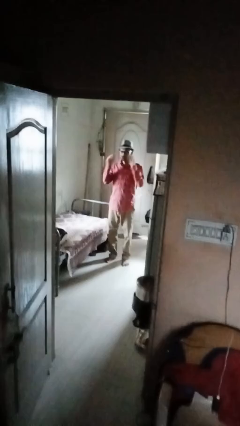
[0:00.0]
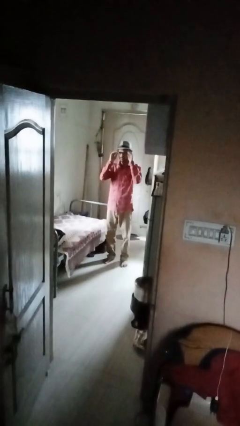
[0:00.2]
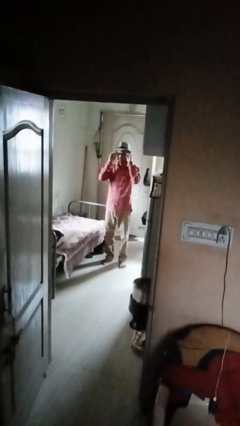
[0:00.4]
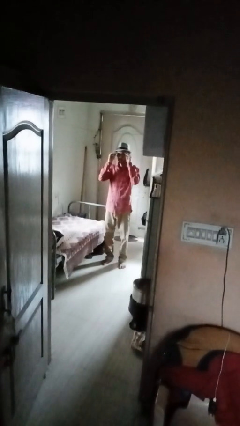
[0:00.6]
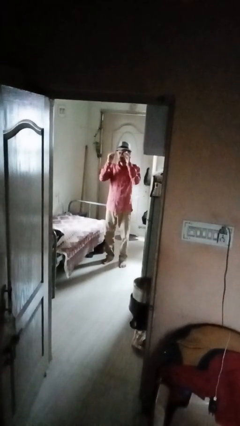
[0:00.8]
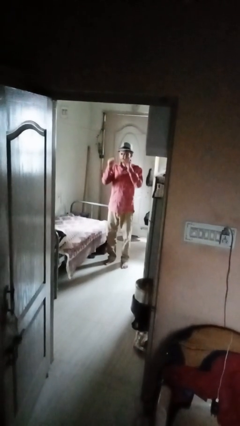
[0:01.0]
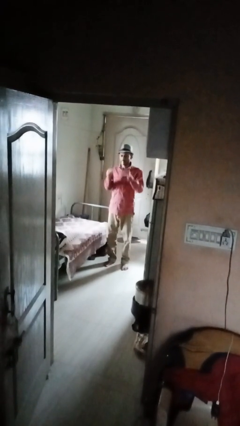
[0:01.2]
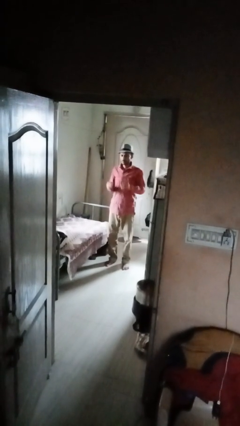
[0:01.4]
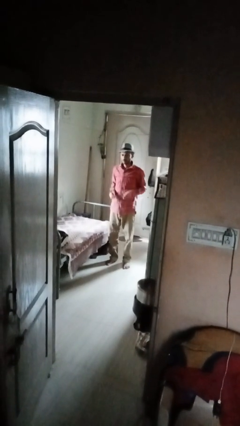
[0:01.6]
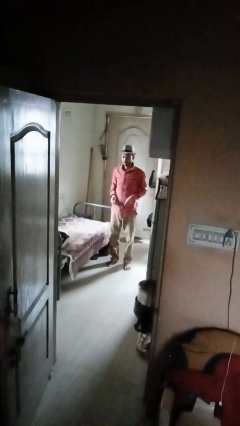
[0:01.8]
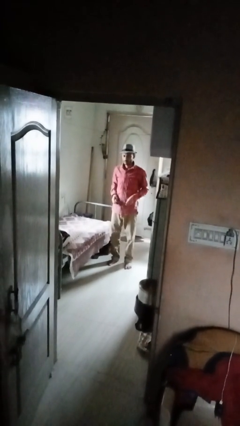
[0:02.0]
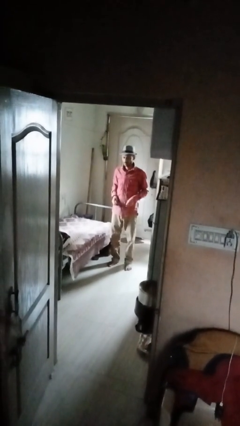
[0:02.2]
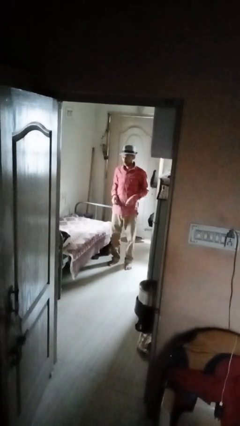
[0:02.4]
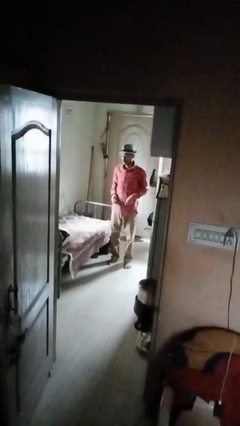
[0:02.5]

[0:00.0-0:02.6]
person takes off glasses

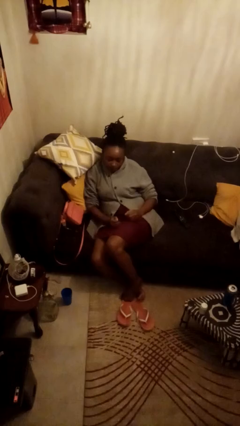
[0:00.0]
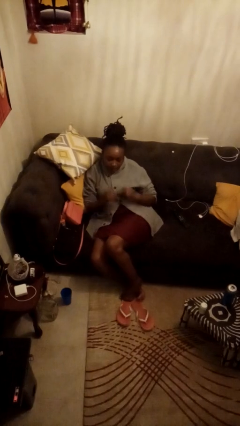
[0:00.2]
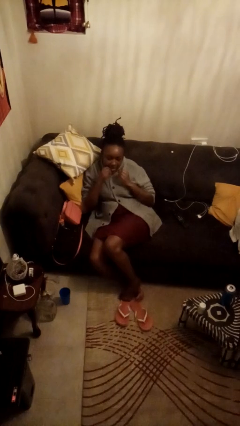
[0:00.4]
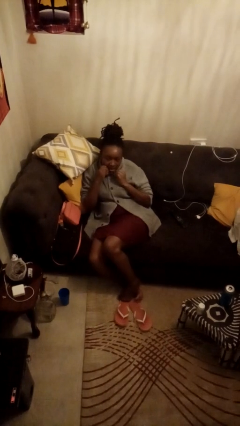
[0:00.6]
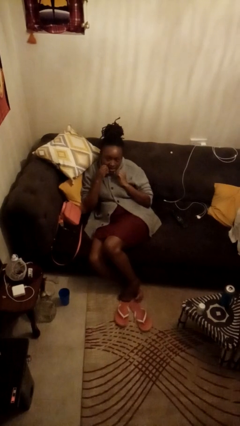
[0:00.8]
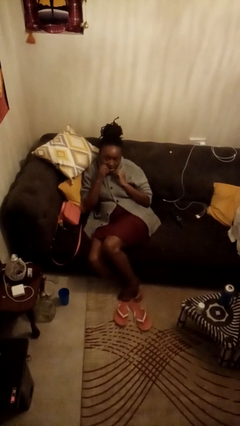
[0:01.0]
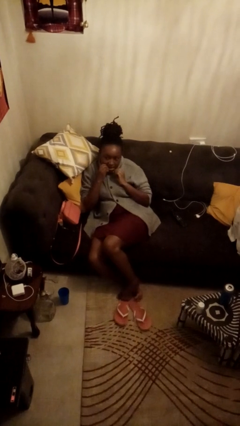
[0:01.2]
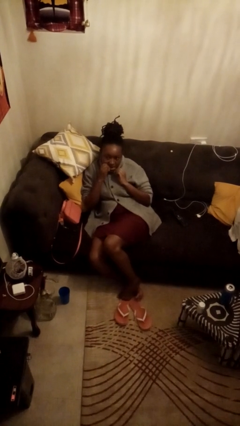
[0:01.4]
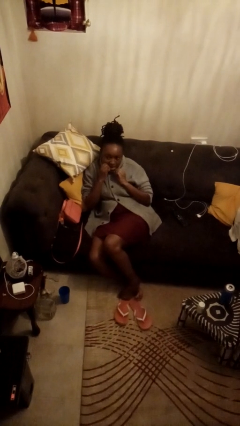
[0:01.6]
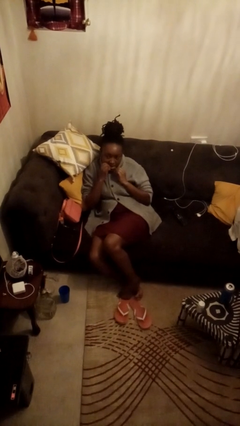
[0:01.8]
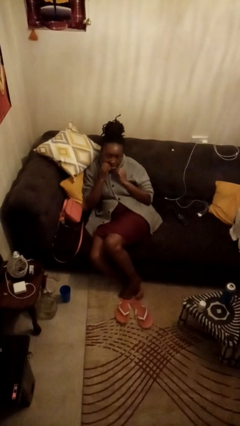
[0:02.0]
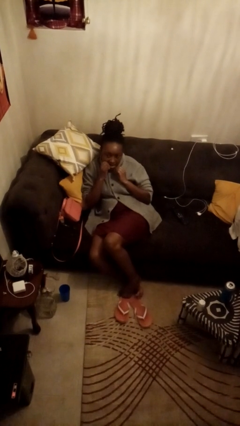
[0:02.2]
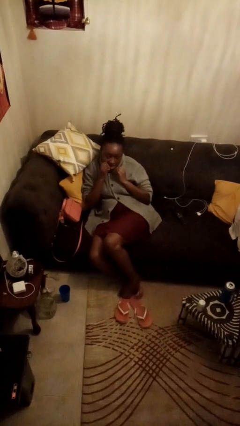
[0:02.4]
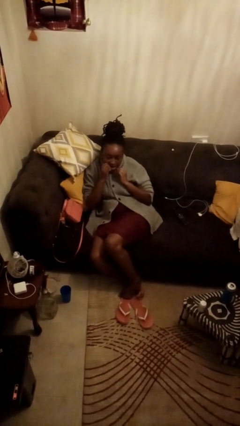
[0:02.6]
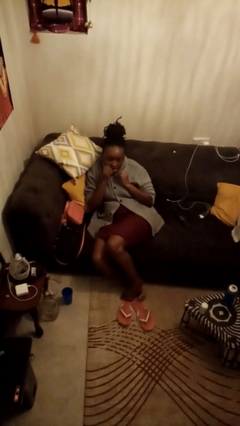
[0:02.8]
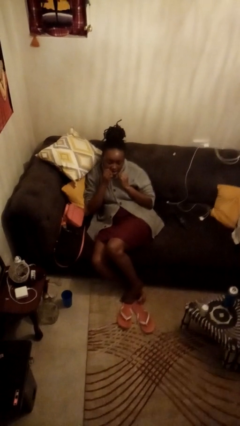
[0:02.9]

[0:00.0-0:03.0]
person flosses

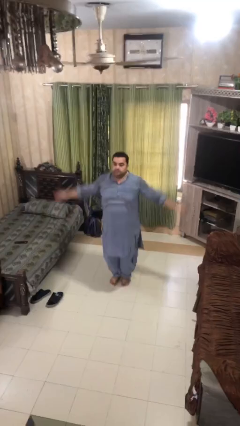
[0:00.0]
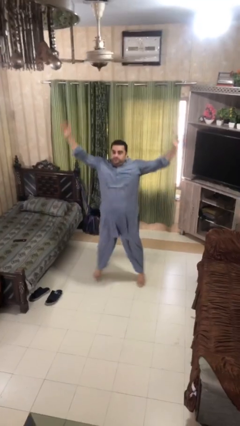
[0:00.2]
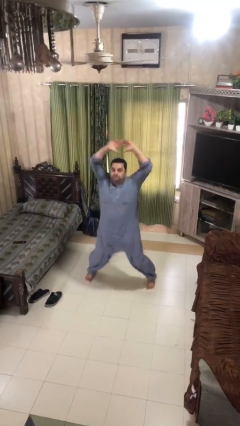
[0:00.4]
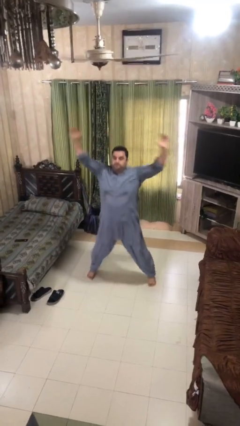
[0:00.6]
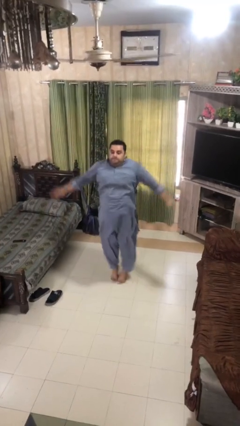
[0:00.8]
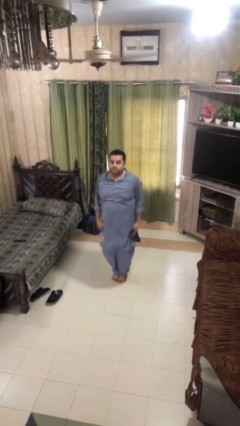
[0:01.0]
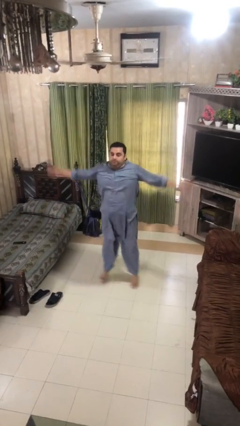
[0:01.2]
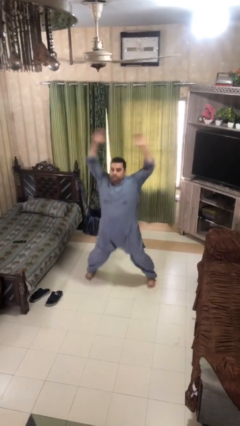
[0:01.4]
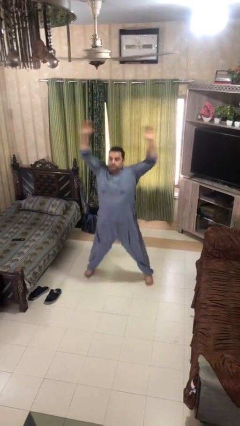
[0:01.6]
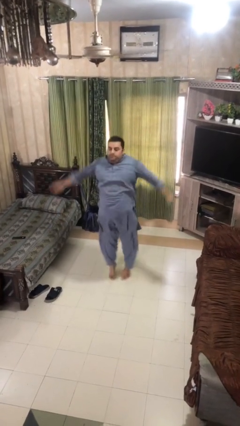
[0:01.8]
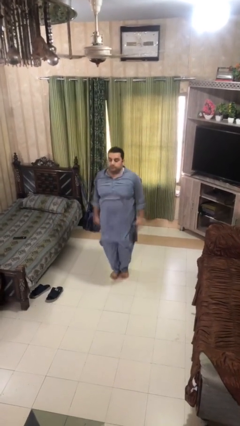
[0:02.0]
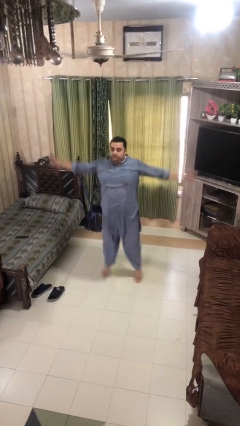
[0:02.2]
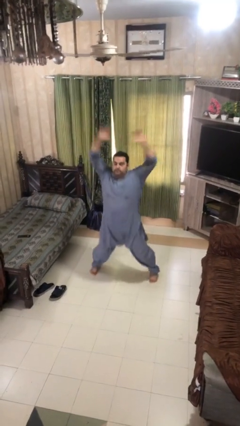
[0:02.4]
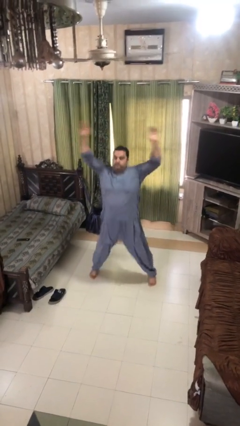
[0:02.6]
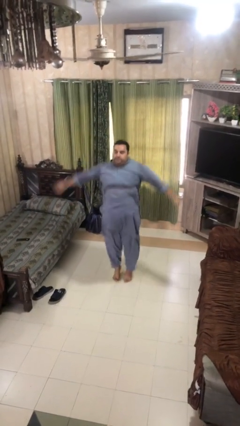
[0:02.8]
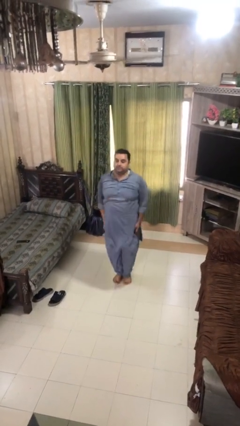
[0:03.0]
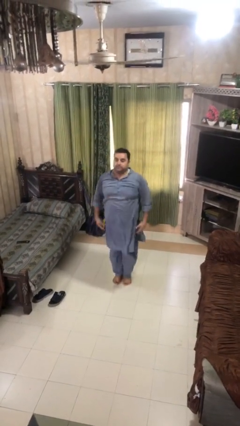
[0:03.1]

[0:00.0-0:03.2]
person exercises with jumping jacks

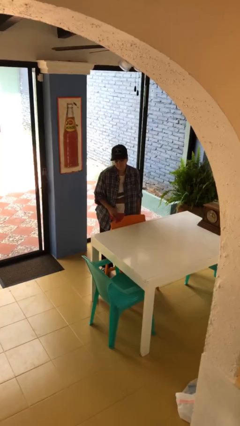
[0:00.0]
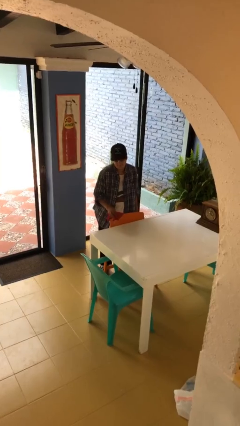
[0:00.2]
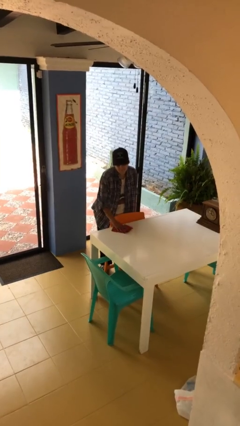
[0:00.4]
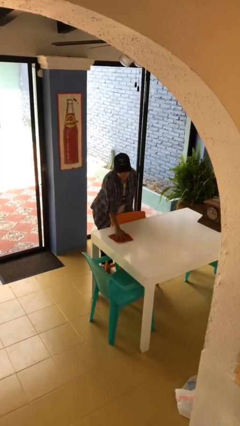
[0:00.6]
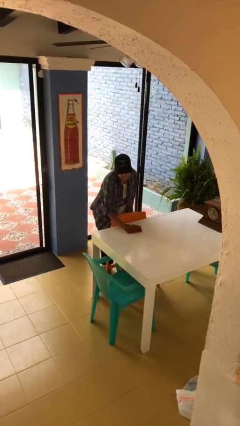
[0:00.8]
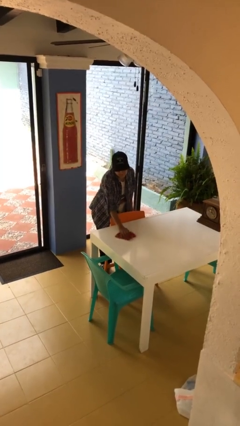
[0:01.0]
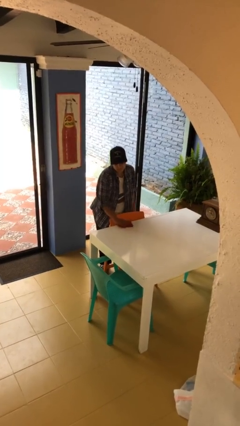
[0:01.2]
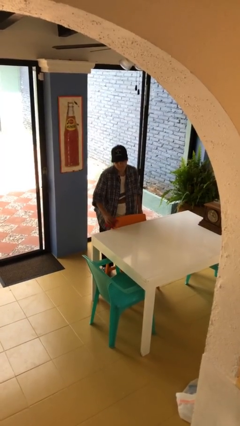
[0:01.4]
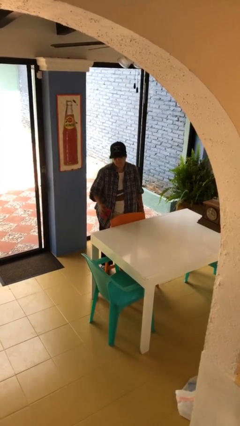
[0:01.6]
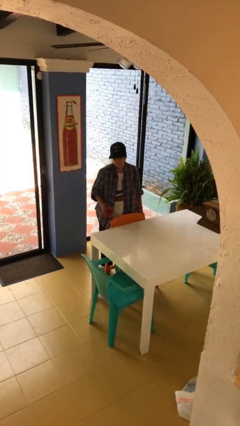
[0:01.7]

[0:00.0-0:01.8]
person cleans table with rag

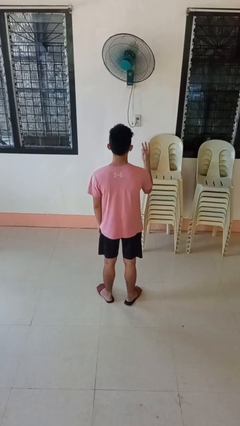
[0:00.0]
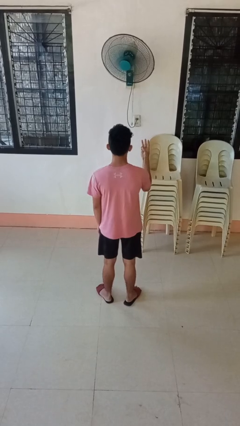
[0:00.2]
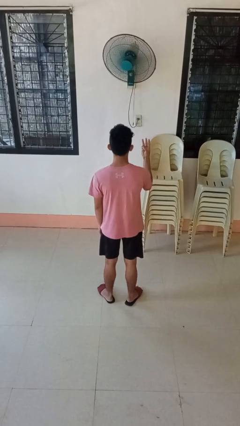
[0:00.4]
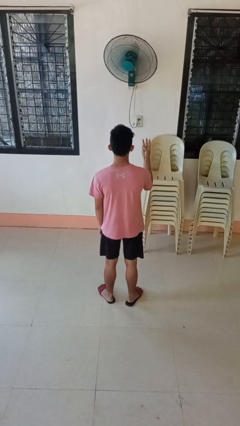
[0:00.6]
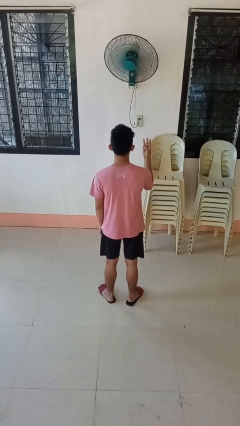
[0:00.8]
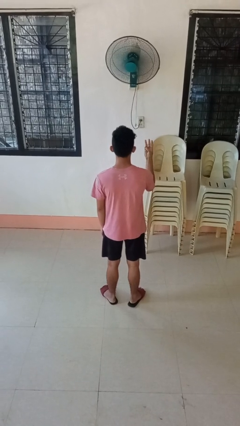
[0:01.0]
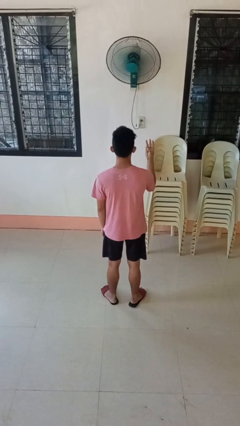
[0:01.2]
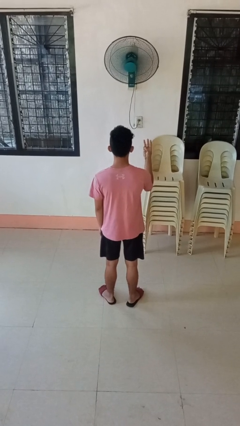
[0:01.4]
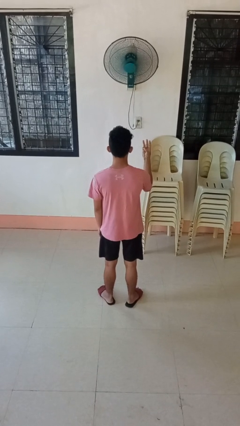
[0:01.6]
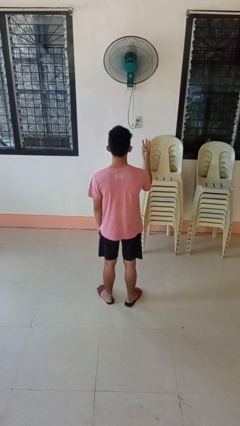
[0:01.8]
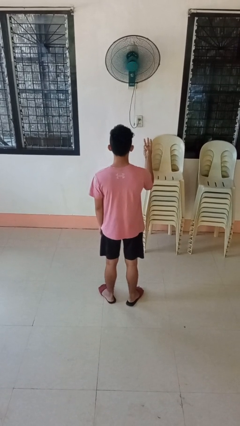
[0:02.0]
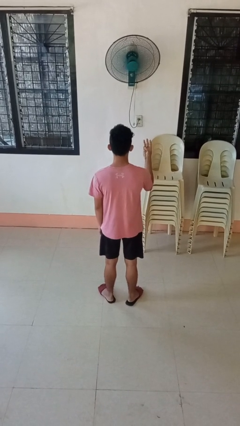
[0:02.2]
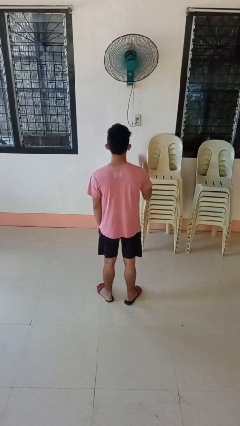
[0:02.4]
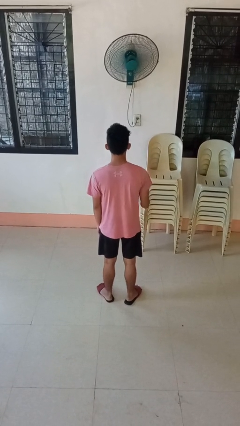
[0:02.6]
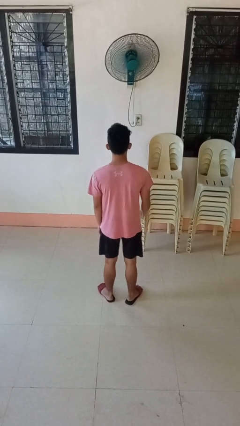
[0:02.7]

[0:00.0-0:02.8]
person gestures number three

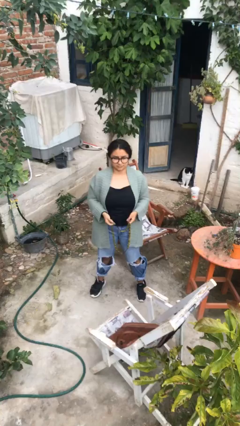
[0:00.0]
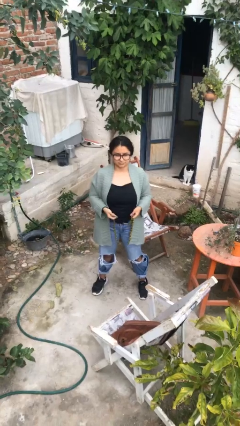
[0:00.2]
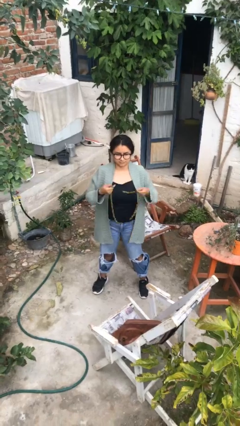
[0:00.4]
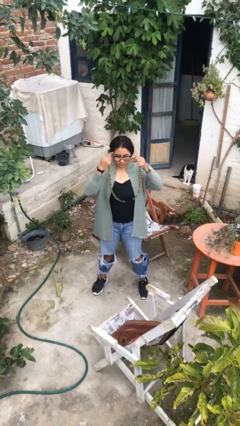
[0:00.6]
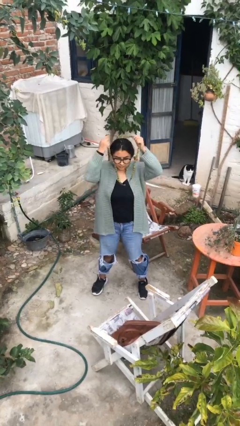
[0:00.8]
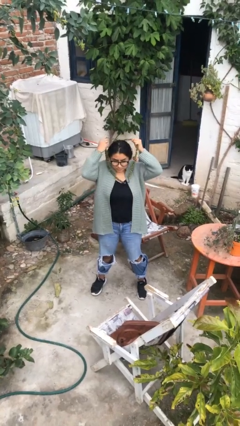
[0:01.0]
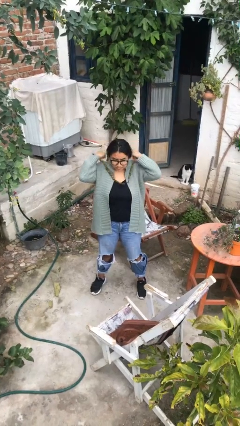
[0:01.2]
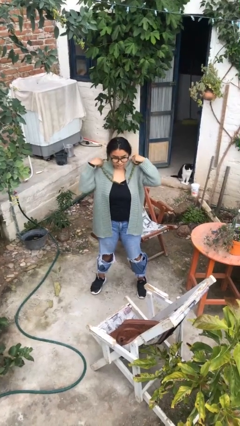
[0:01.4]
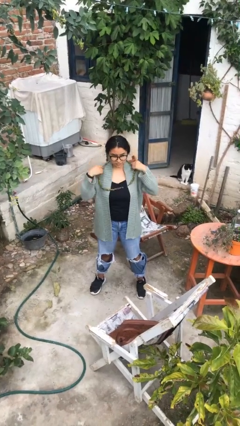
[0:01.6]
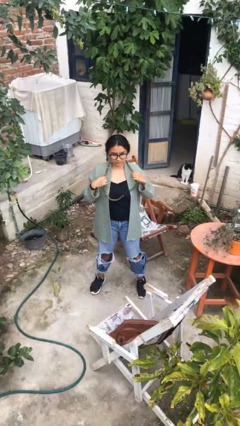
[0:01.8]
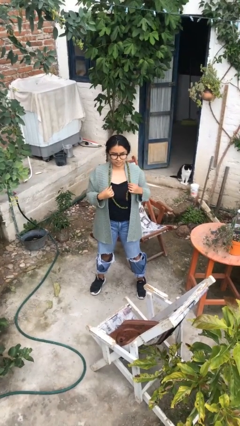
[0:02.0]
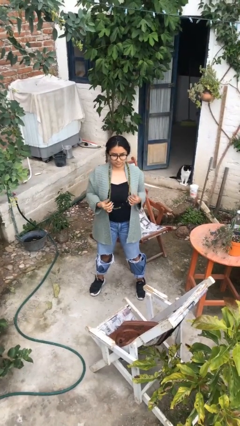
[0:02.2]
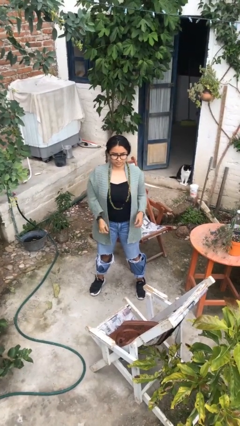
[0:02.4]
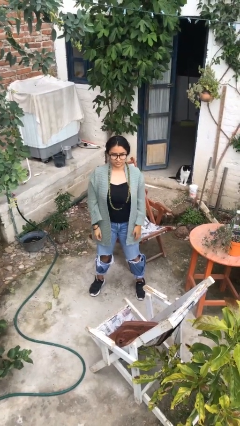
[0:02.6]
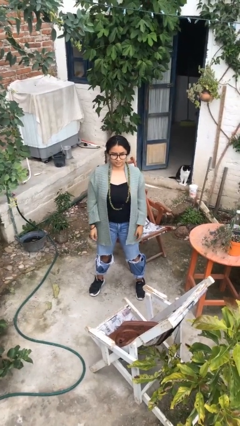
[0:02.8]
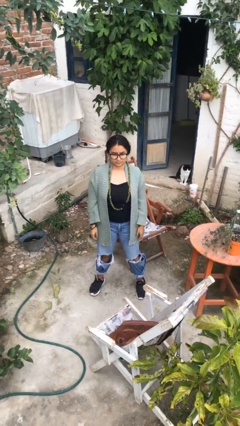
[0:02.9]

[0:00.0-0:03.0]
person puts on necklace

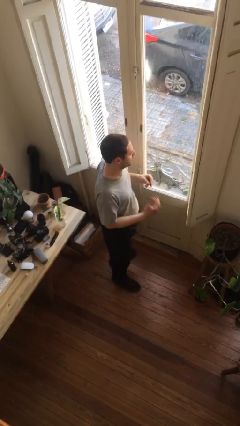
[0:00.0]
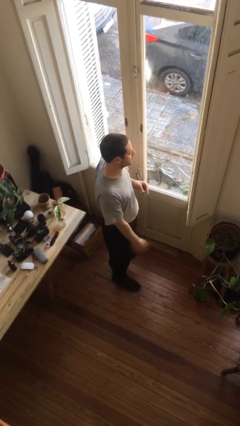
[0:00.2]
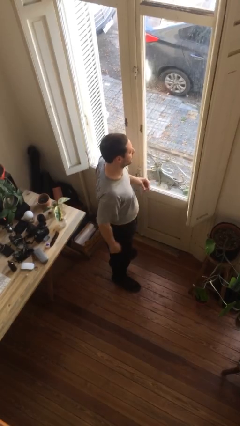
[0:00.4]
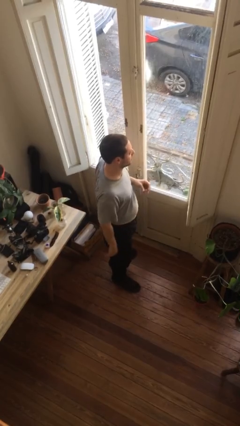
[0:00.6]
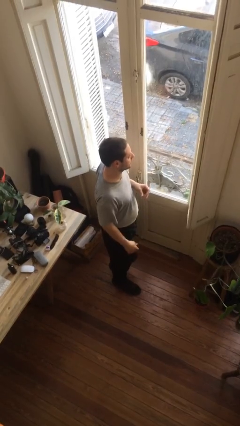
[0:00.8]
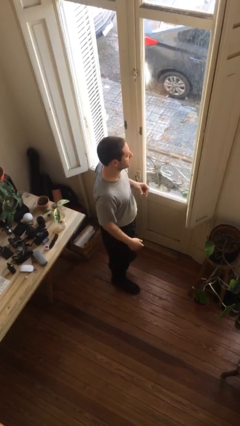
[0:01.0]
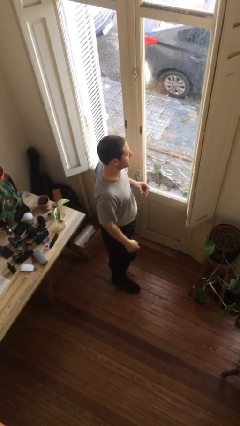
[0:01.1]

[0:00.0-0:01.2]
person takes off ring
